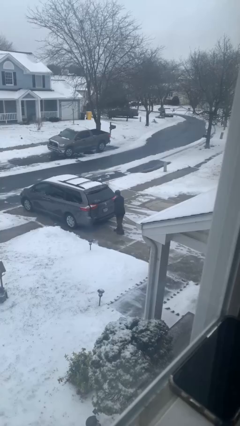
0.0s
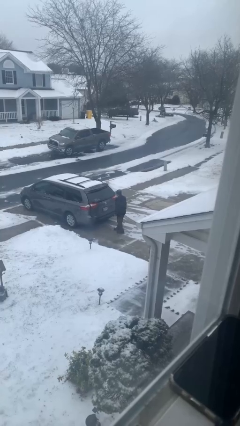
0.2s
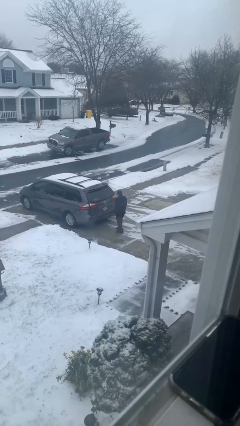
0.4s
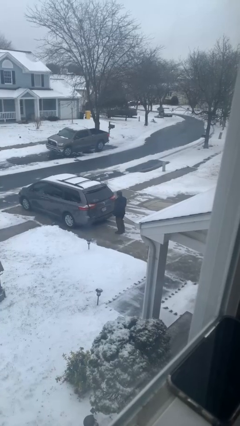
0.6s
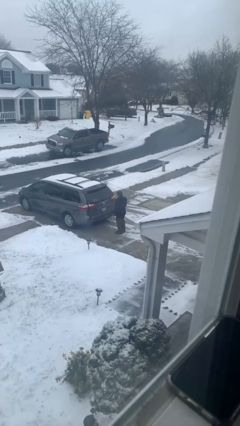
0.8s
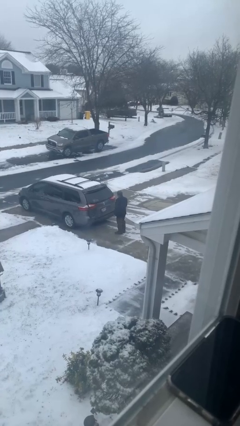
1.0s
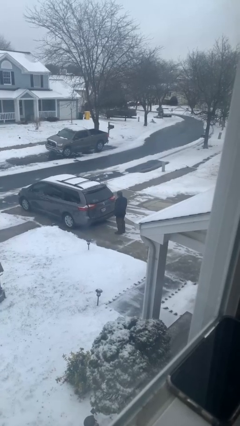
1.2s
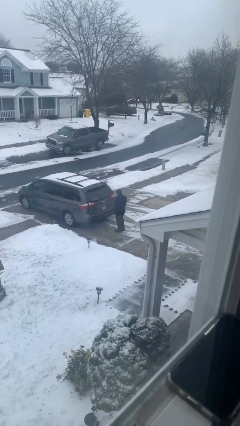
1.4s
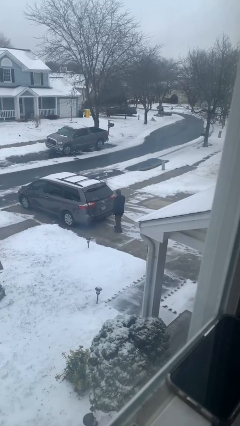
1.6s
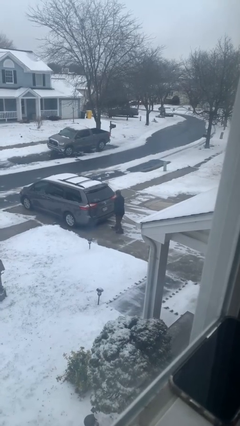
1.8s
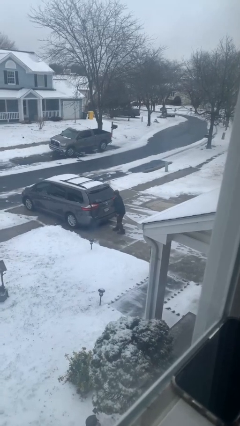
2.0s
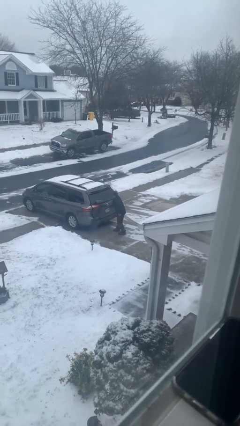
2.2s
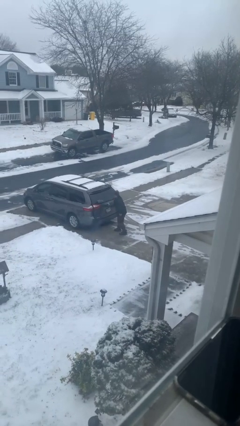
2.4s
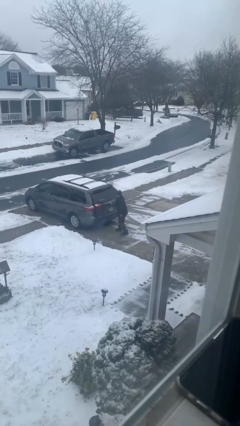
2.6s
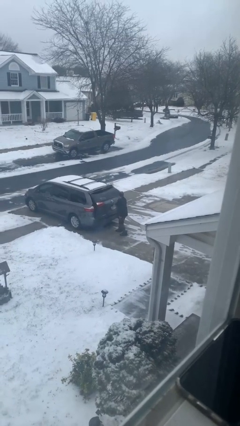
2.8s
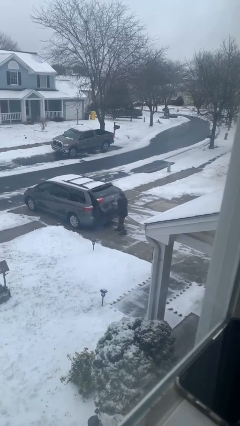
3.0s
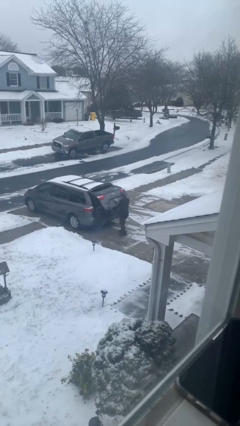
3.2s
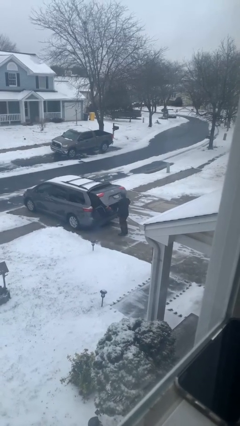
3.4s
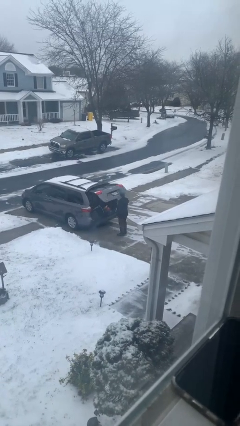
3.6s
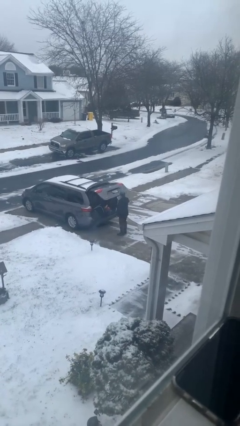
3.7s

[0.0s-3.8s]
person opens car trunk

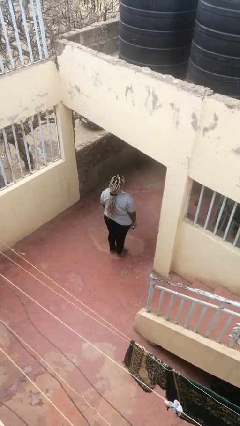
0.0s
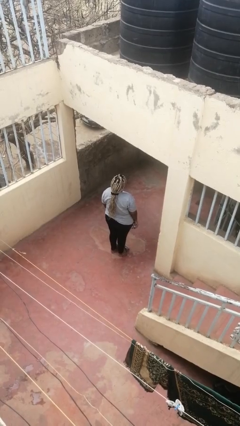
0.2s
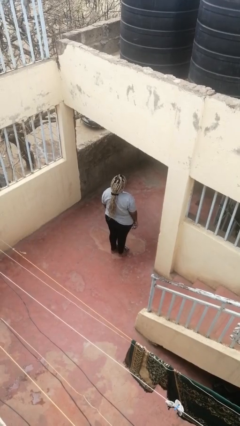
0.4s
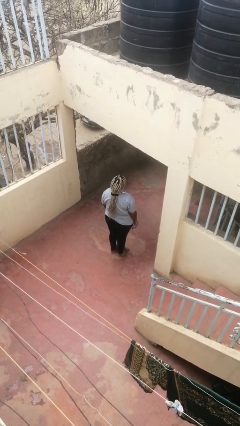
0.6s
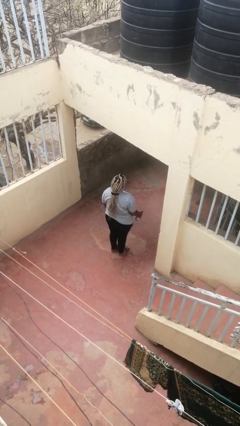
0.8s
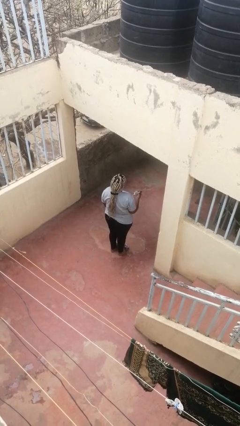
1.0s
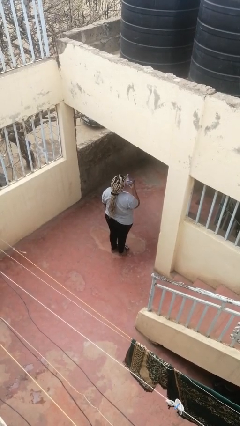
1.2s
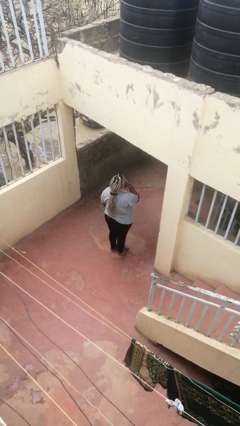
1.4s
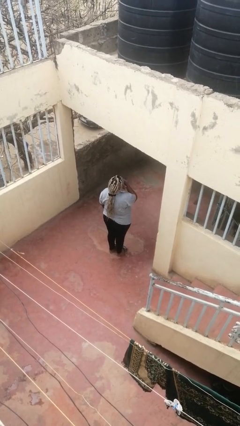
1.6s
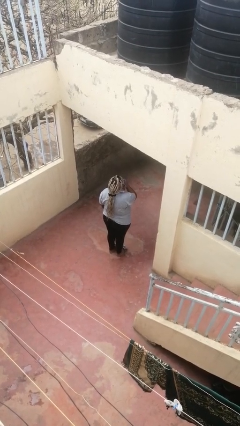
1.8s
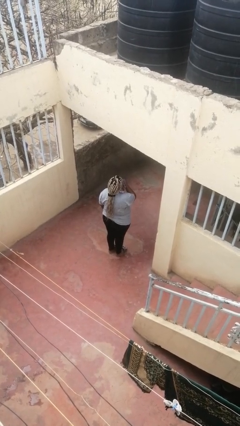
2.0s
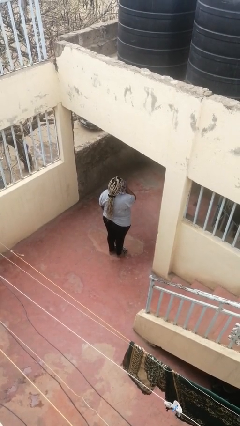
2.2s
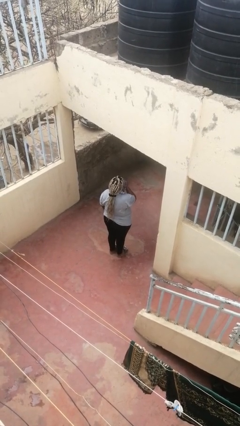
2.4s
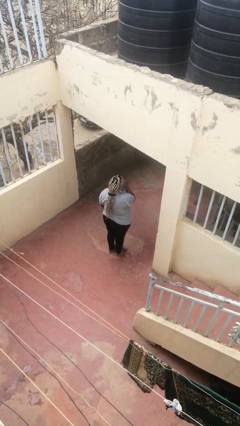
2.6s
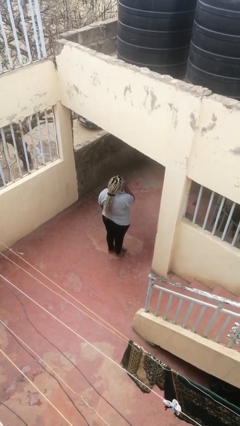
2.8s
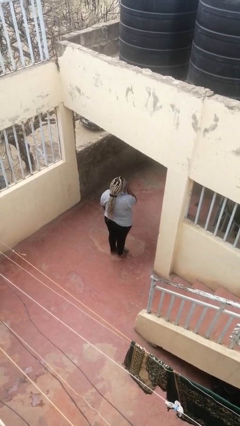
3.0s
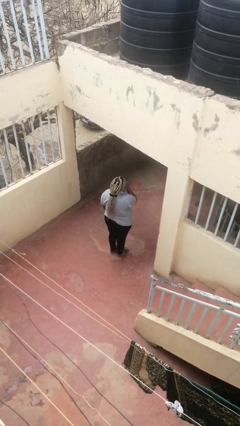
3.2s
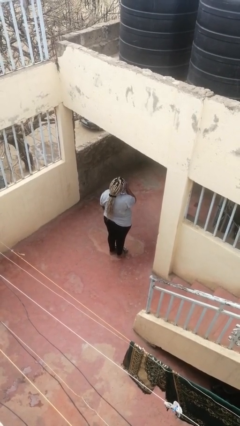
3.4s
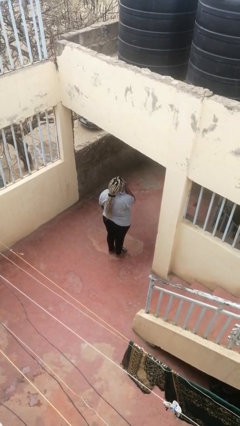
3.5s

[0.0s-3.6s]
person blows nose

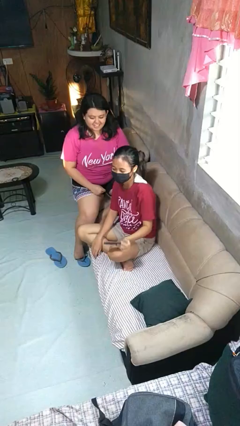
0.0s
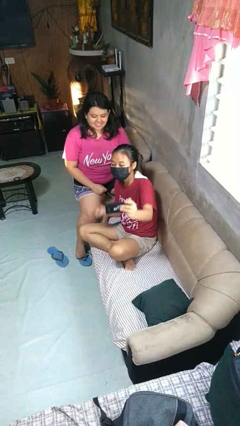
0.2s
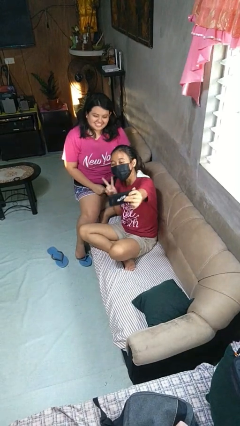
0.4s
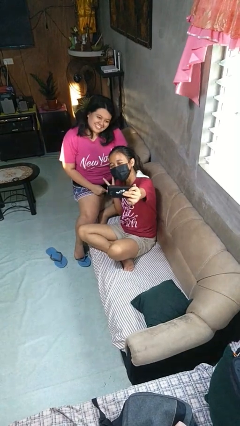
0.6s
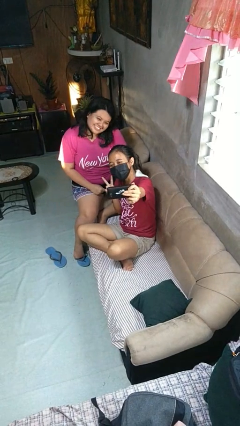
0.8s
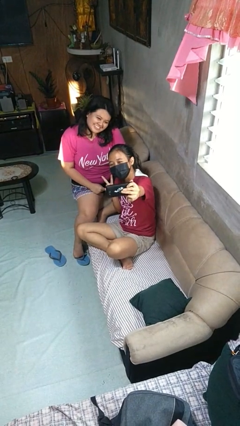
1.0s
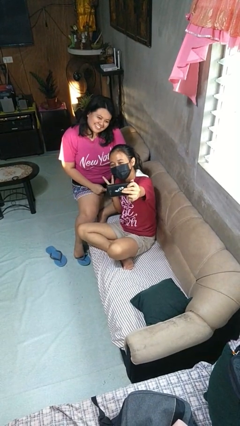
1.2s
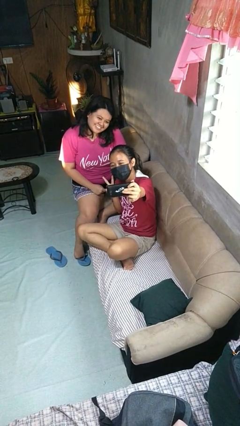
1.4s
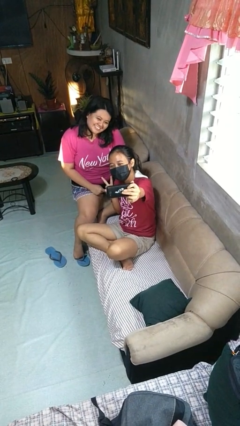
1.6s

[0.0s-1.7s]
person takes selfie with person

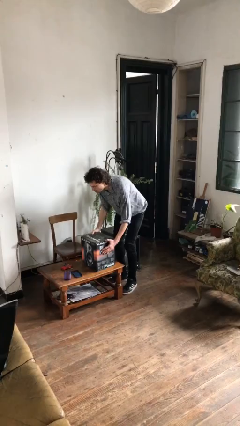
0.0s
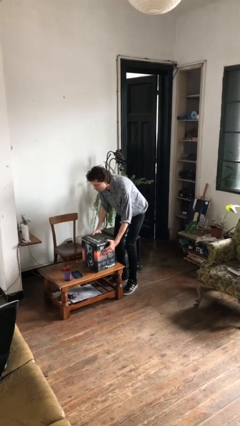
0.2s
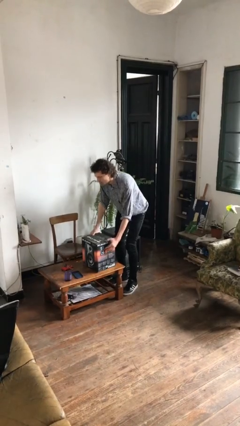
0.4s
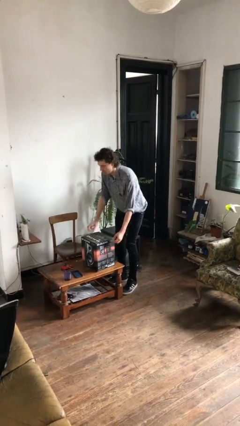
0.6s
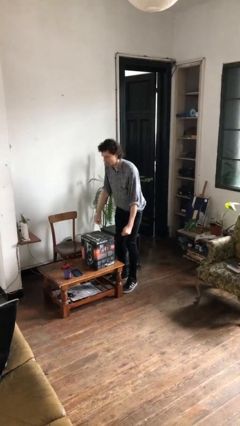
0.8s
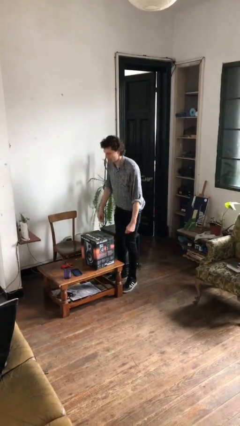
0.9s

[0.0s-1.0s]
person puts down object on table

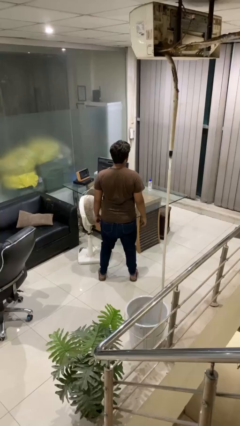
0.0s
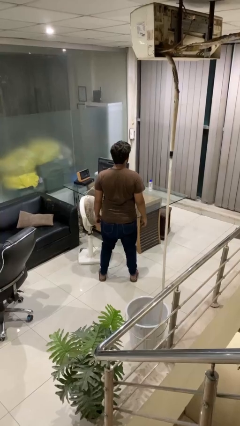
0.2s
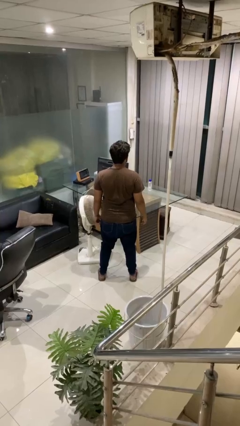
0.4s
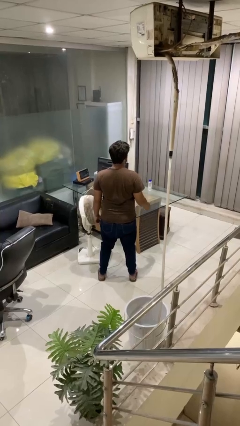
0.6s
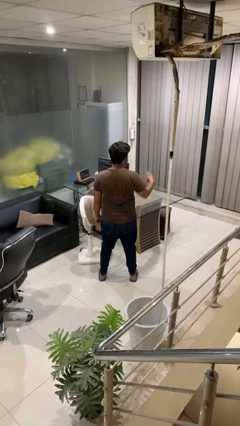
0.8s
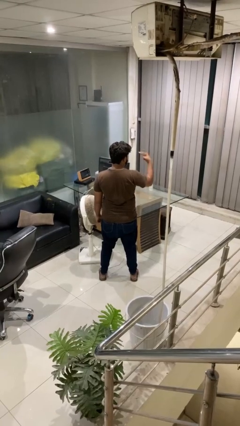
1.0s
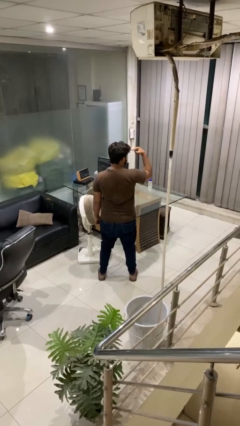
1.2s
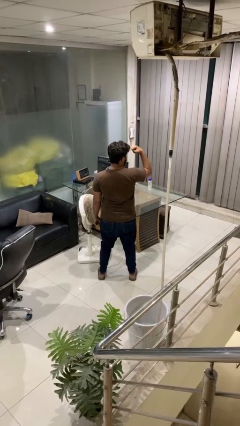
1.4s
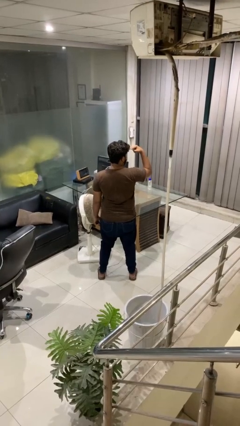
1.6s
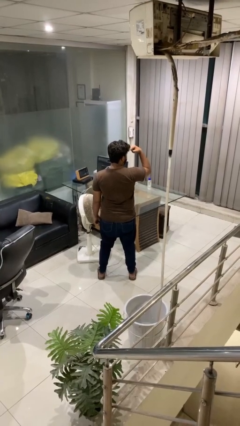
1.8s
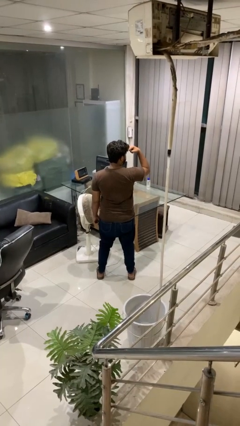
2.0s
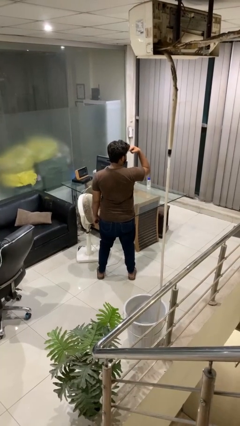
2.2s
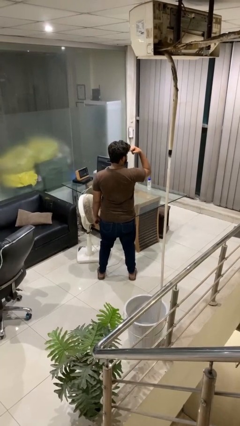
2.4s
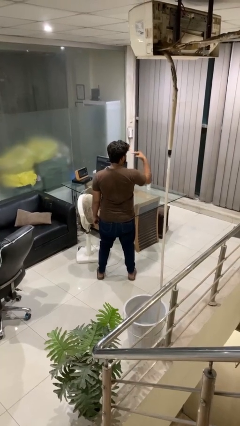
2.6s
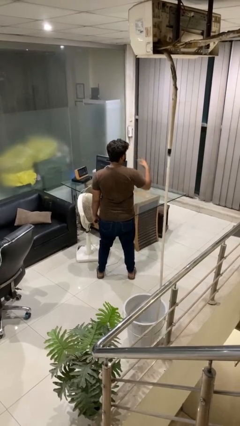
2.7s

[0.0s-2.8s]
person gestures watch closely

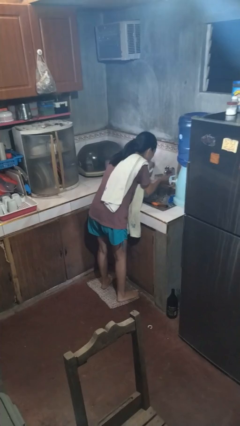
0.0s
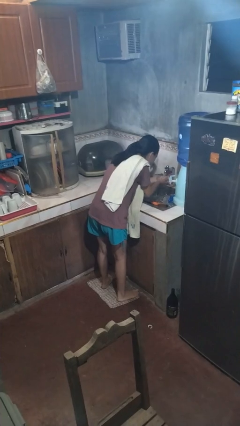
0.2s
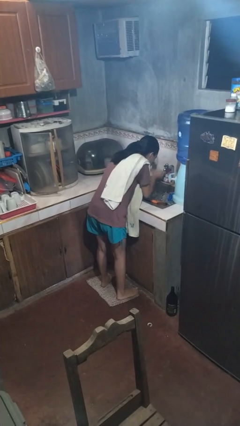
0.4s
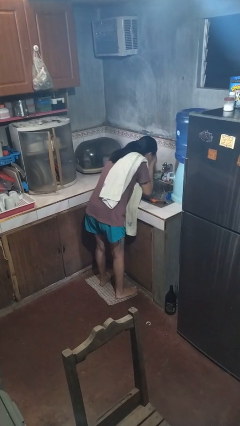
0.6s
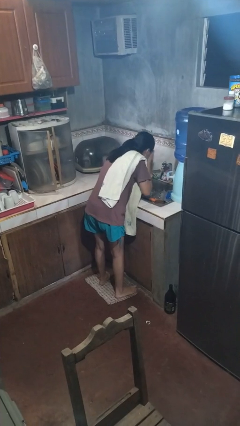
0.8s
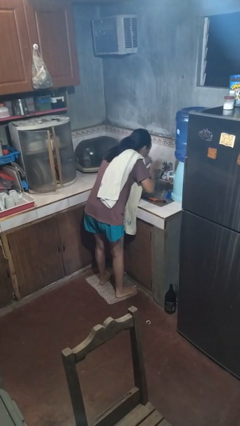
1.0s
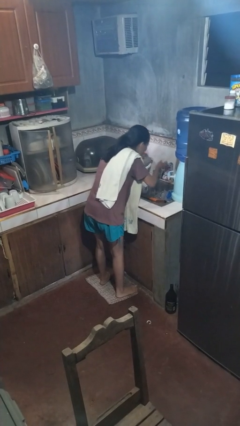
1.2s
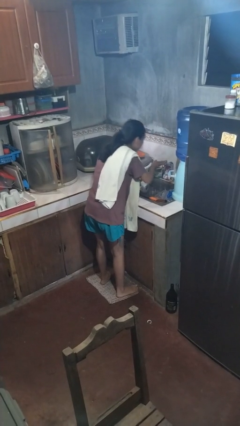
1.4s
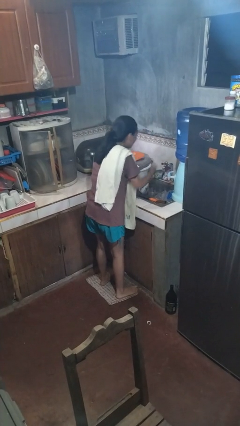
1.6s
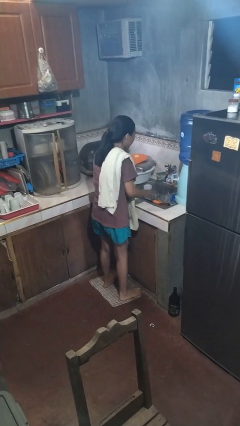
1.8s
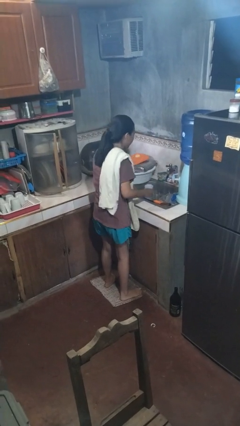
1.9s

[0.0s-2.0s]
person washes face

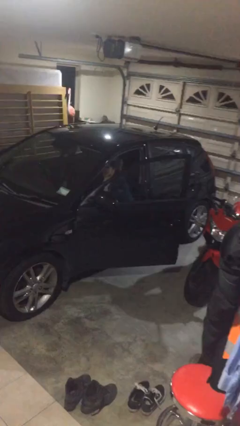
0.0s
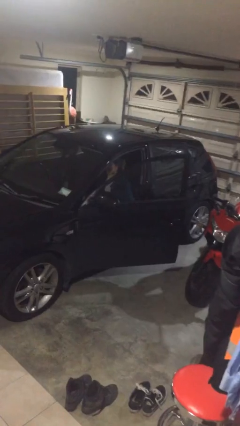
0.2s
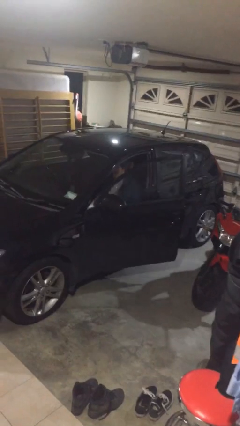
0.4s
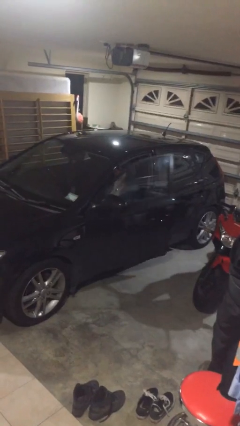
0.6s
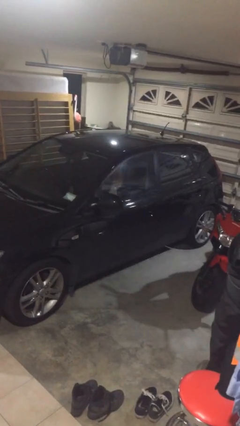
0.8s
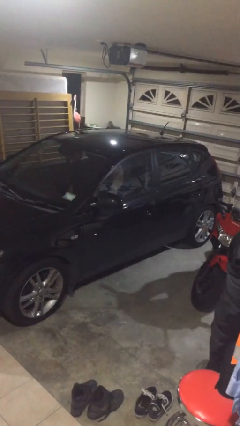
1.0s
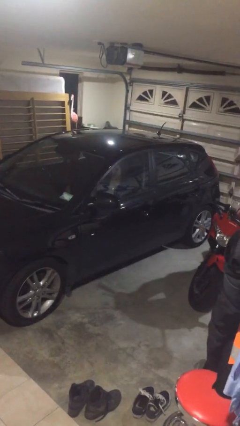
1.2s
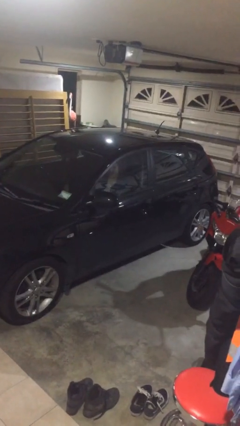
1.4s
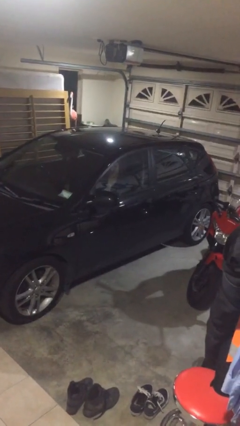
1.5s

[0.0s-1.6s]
person closes car door

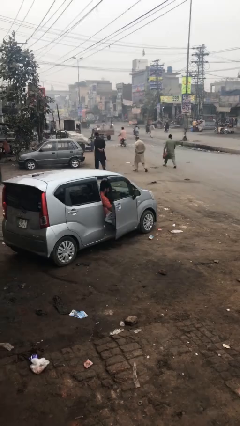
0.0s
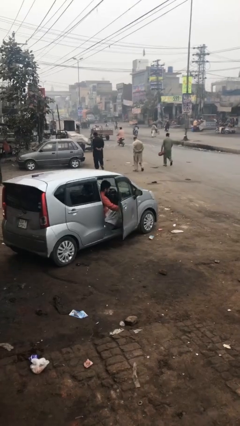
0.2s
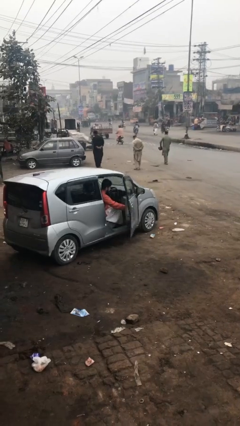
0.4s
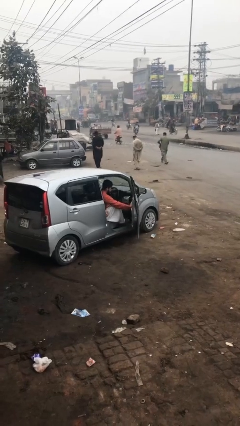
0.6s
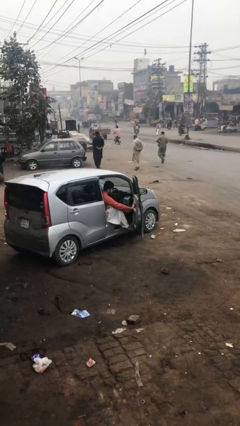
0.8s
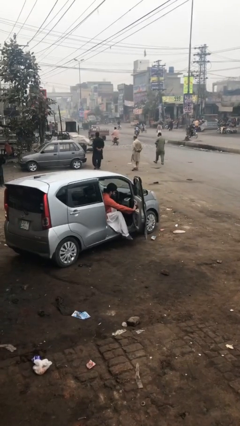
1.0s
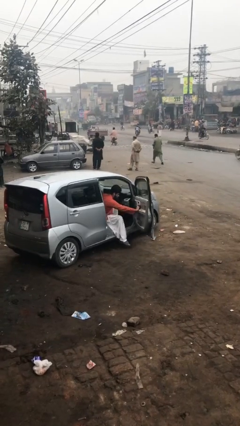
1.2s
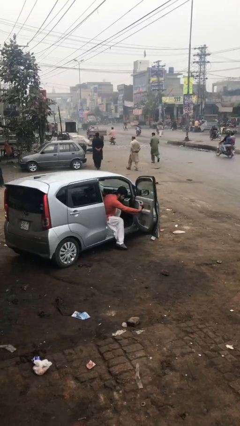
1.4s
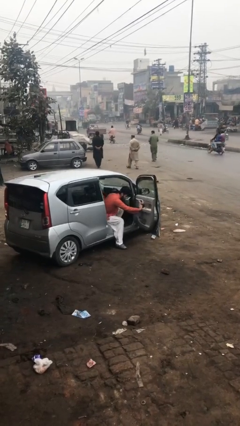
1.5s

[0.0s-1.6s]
person opens car door
